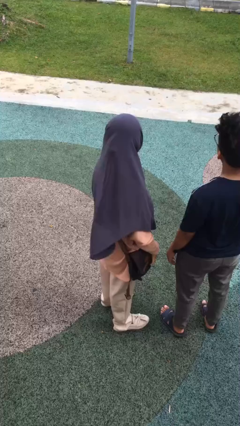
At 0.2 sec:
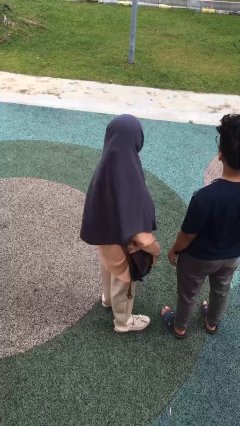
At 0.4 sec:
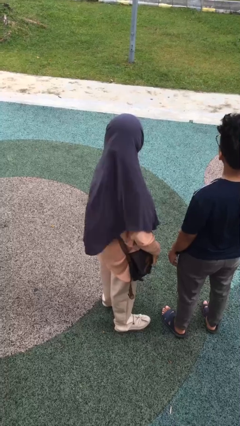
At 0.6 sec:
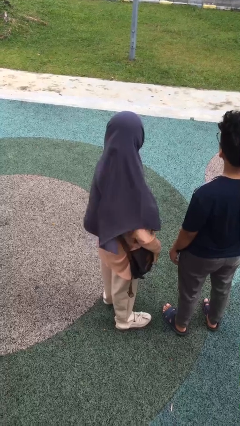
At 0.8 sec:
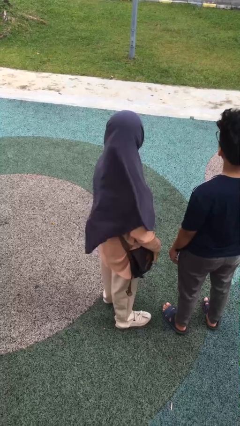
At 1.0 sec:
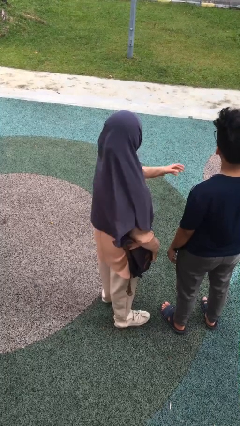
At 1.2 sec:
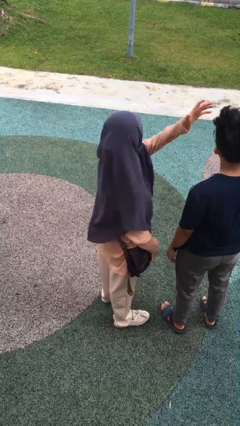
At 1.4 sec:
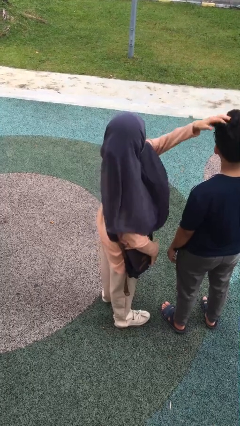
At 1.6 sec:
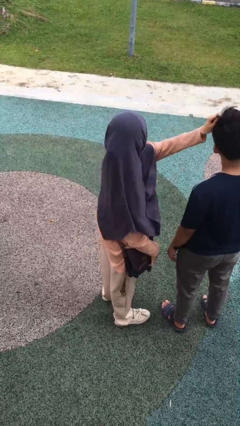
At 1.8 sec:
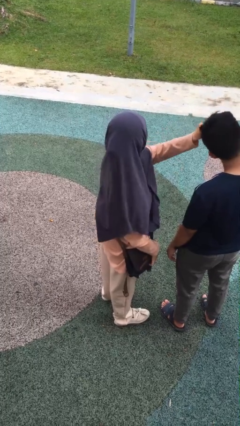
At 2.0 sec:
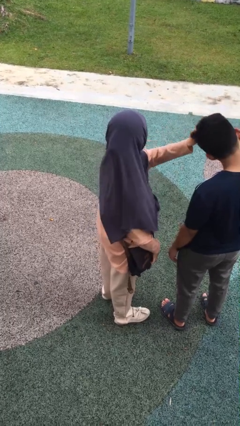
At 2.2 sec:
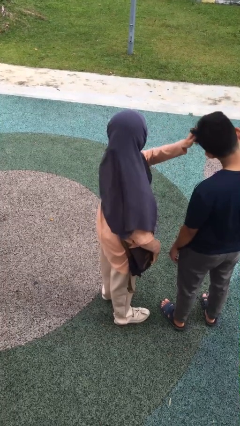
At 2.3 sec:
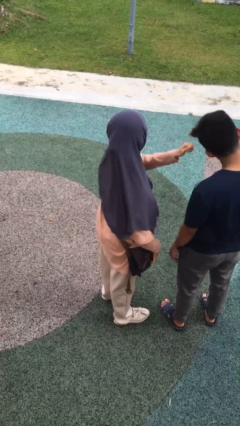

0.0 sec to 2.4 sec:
person grabs person by hair

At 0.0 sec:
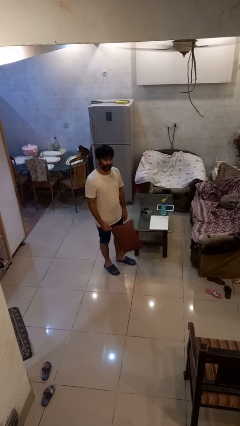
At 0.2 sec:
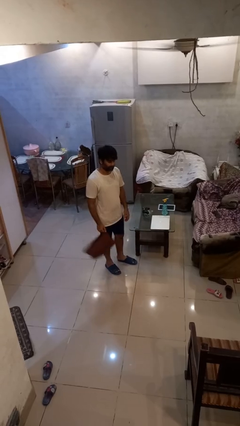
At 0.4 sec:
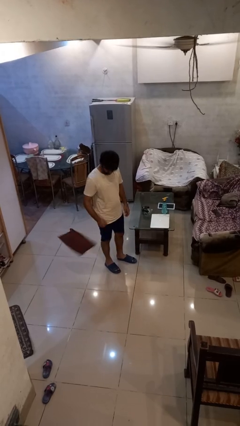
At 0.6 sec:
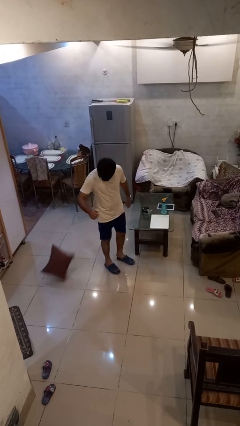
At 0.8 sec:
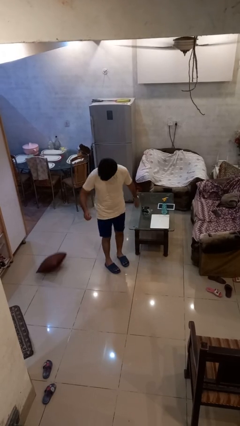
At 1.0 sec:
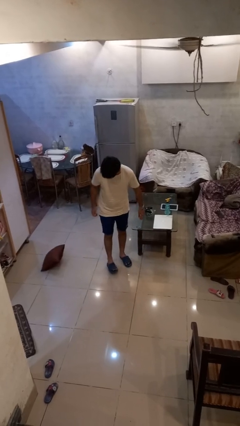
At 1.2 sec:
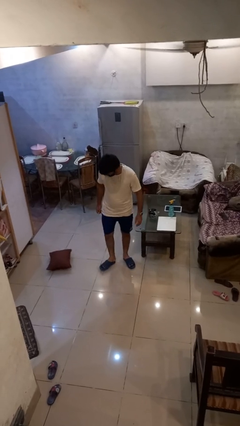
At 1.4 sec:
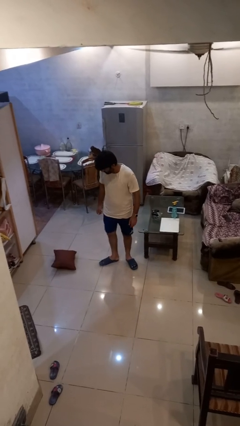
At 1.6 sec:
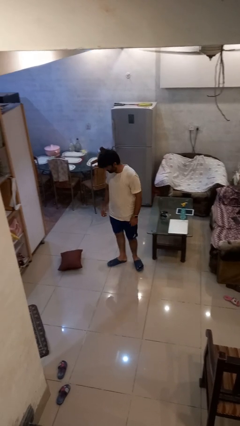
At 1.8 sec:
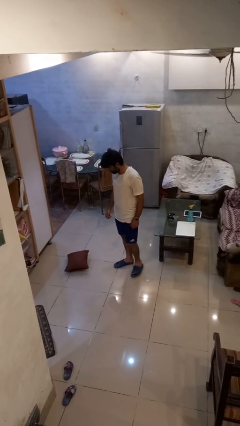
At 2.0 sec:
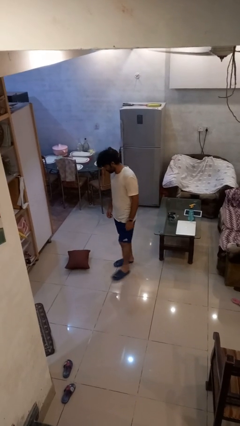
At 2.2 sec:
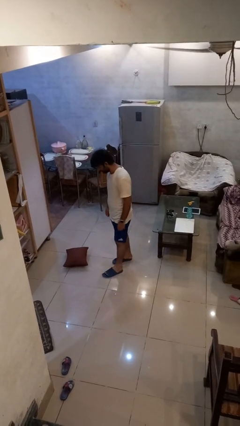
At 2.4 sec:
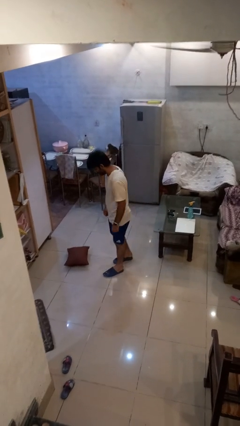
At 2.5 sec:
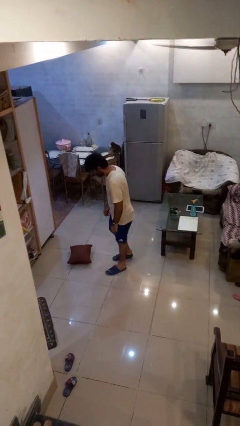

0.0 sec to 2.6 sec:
person drops object

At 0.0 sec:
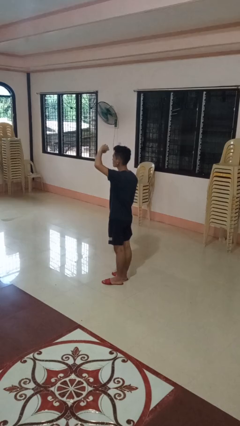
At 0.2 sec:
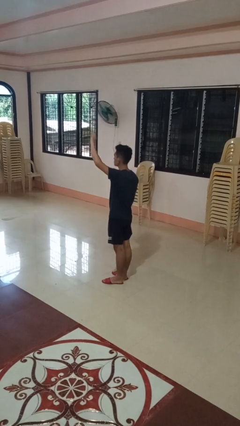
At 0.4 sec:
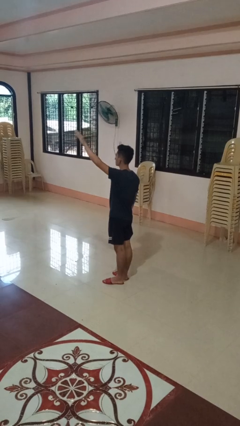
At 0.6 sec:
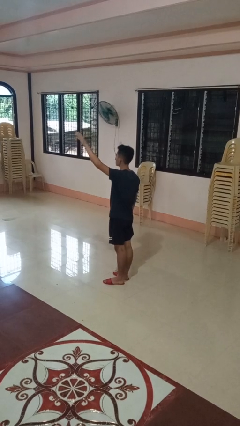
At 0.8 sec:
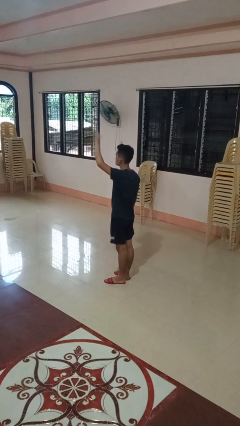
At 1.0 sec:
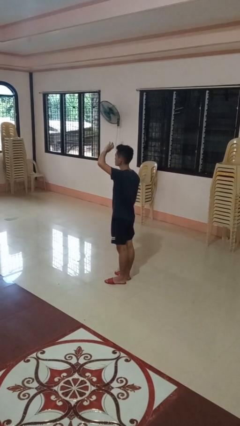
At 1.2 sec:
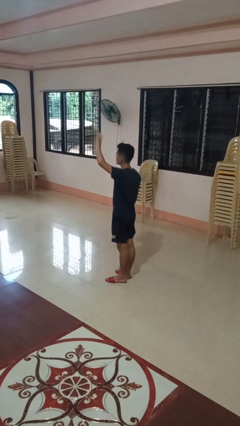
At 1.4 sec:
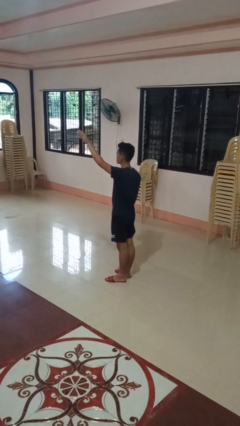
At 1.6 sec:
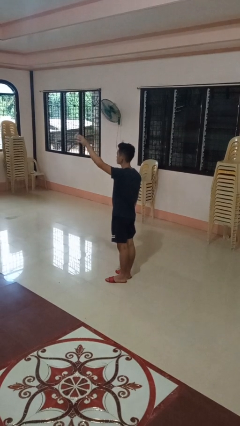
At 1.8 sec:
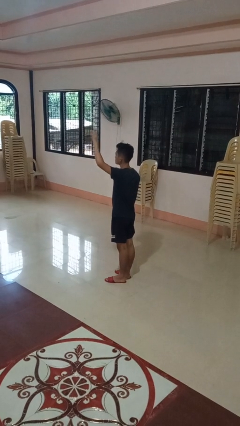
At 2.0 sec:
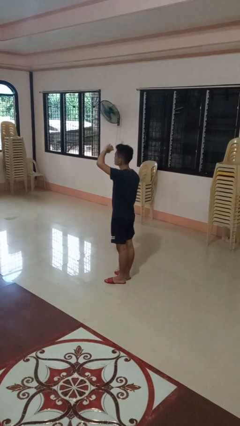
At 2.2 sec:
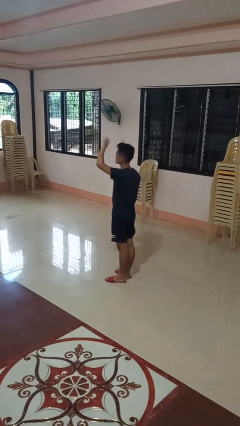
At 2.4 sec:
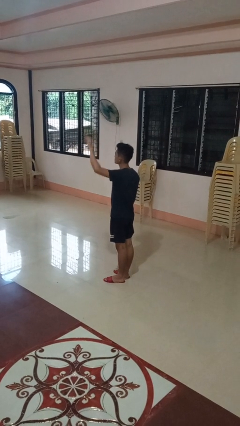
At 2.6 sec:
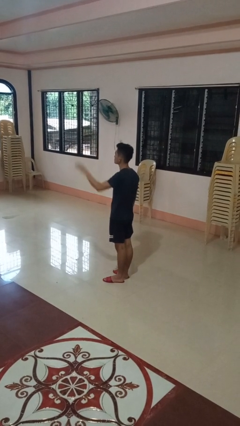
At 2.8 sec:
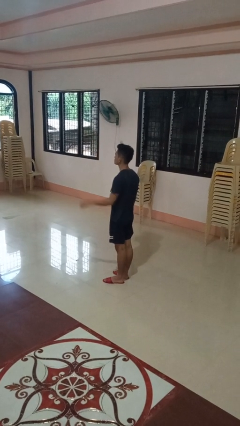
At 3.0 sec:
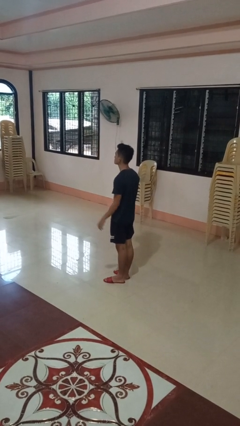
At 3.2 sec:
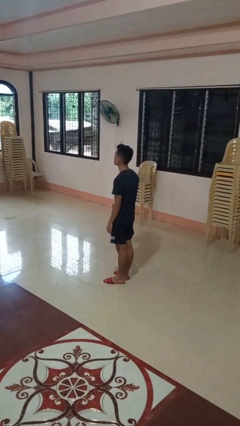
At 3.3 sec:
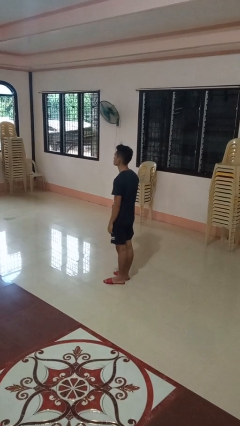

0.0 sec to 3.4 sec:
person waves at person

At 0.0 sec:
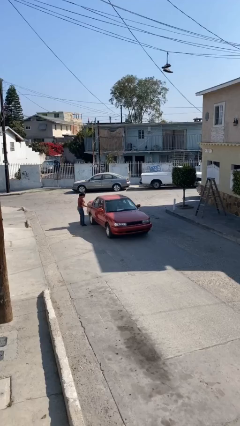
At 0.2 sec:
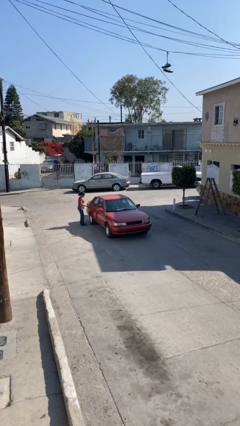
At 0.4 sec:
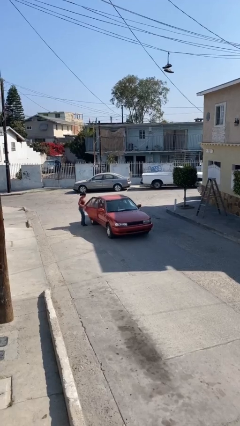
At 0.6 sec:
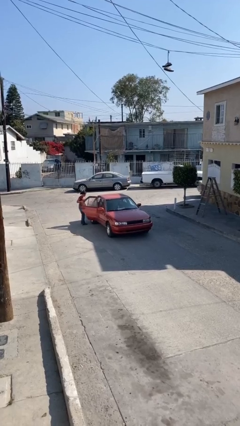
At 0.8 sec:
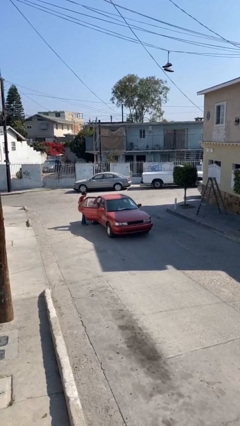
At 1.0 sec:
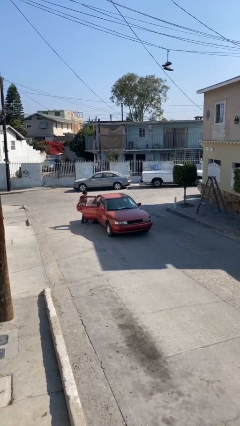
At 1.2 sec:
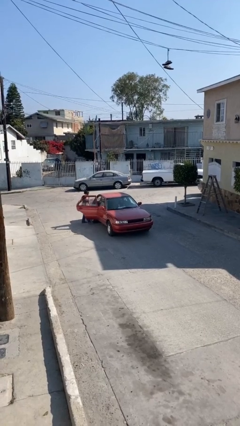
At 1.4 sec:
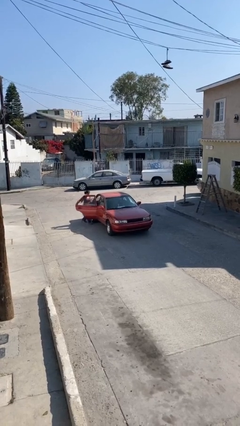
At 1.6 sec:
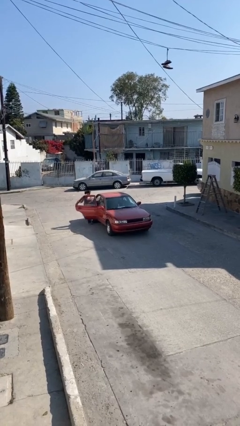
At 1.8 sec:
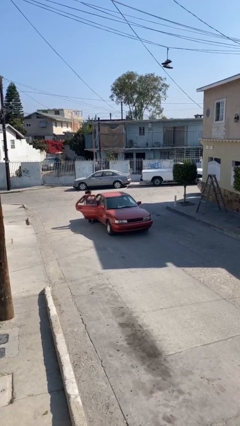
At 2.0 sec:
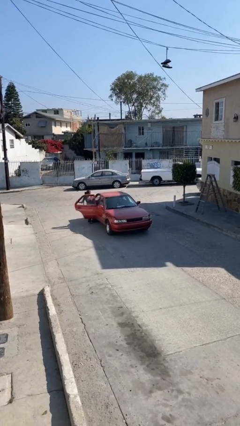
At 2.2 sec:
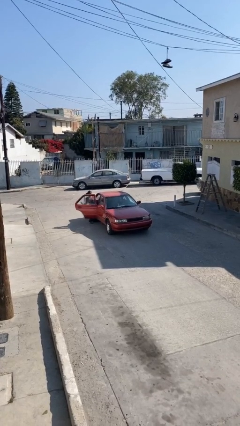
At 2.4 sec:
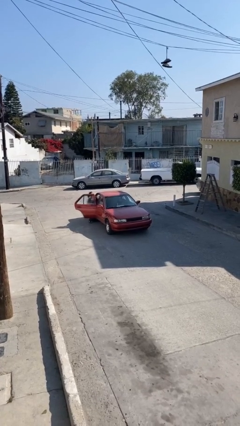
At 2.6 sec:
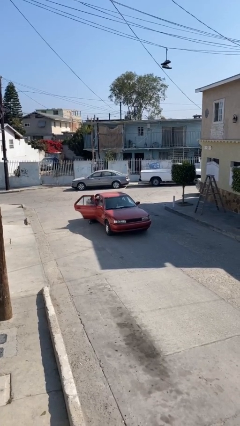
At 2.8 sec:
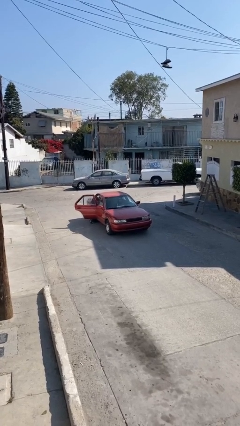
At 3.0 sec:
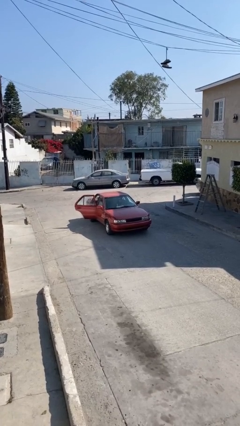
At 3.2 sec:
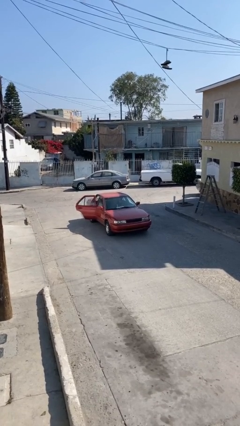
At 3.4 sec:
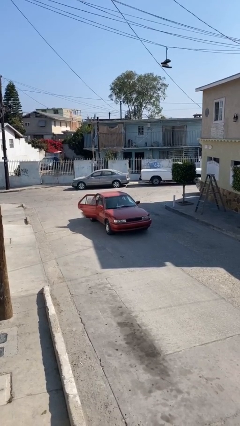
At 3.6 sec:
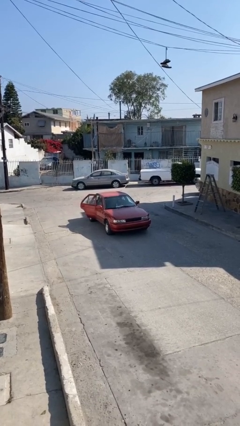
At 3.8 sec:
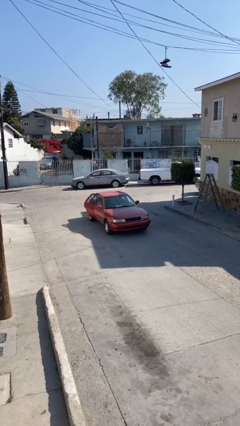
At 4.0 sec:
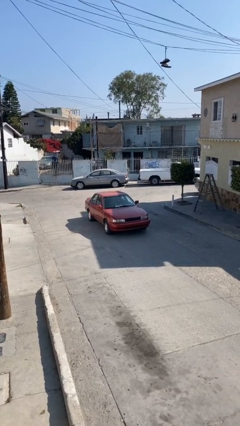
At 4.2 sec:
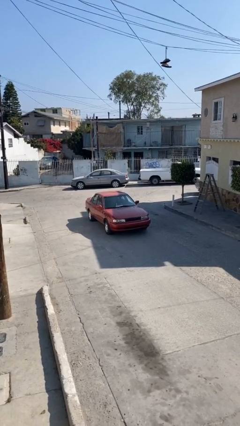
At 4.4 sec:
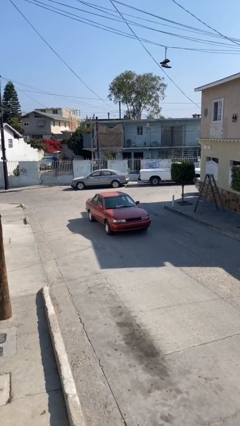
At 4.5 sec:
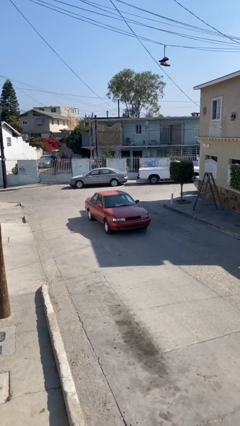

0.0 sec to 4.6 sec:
car picks up person

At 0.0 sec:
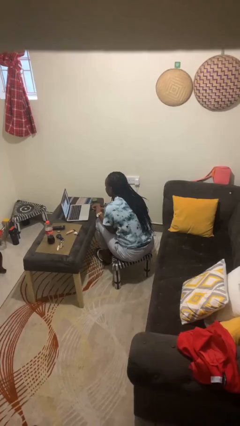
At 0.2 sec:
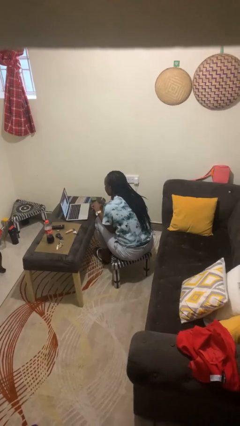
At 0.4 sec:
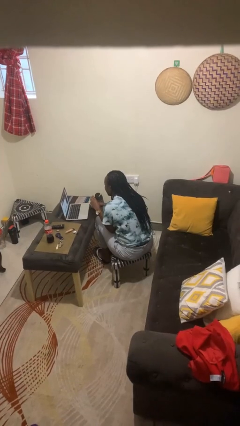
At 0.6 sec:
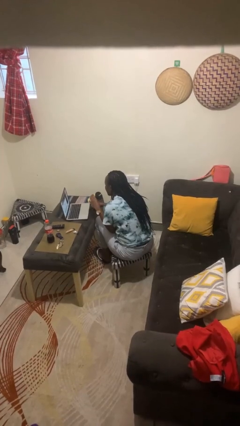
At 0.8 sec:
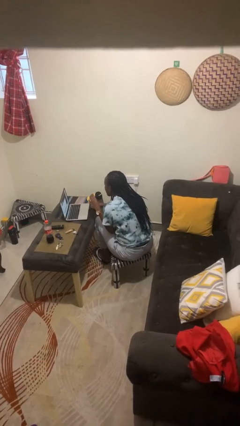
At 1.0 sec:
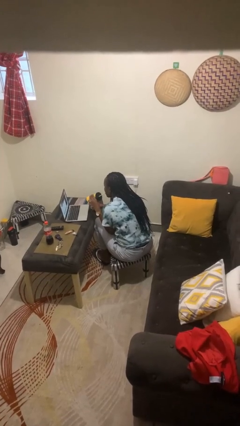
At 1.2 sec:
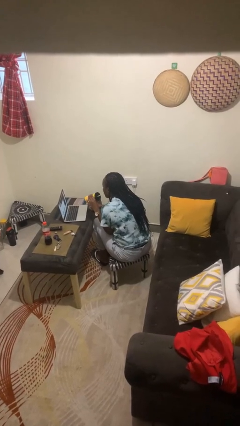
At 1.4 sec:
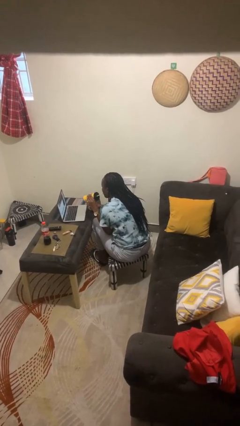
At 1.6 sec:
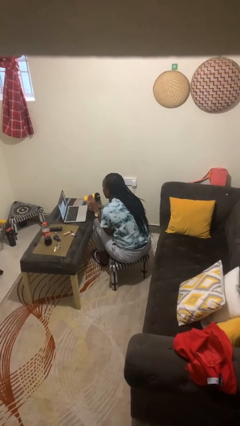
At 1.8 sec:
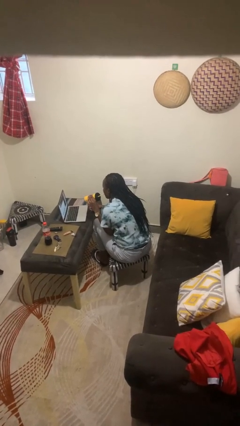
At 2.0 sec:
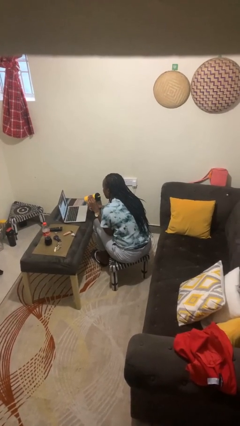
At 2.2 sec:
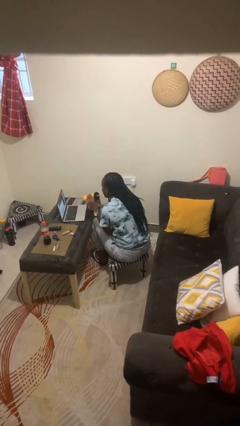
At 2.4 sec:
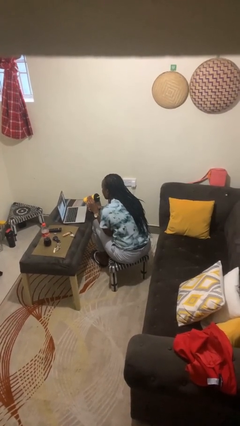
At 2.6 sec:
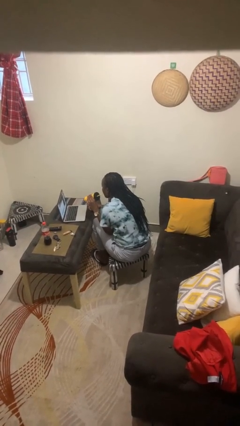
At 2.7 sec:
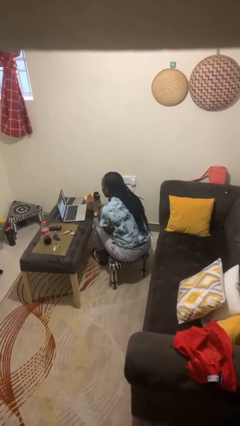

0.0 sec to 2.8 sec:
person drinks from straw

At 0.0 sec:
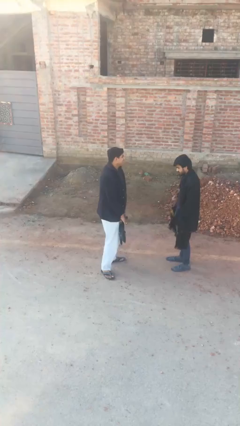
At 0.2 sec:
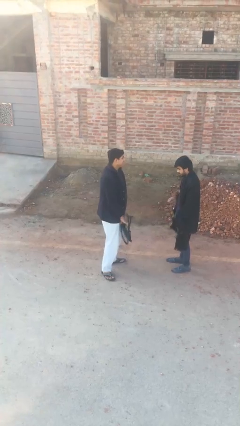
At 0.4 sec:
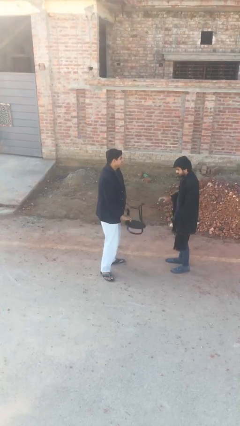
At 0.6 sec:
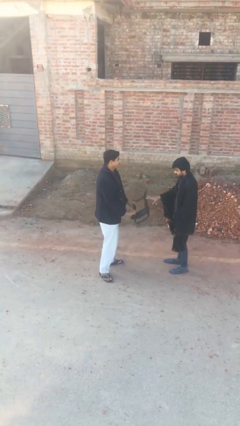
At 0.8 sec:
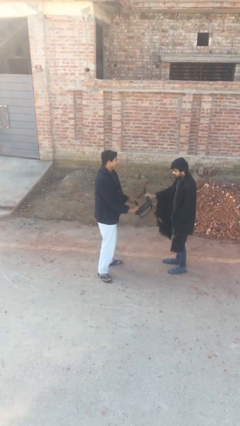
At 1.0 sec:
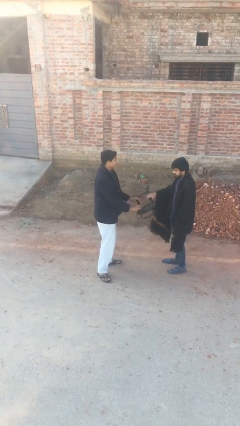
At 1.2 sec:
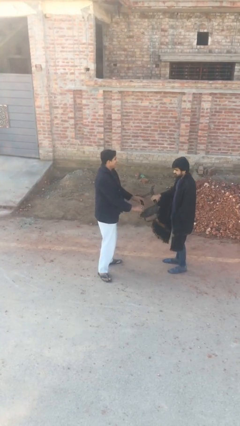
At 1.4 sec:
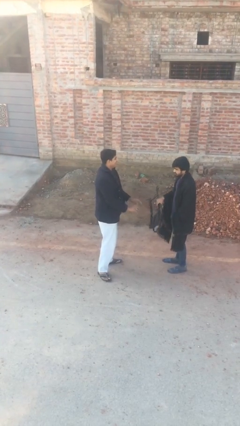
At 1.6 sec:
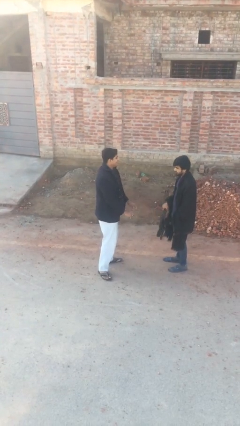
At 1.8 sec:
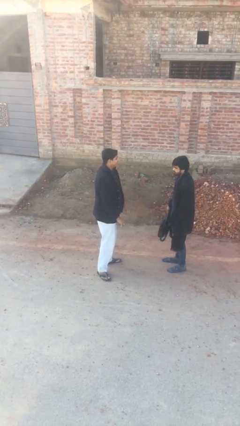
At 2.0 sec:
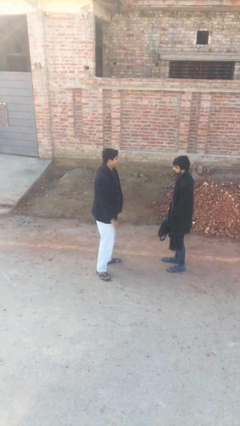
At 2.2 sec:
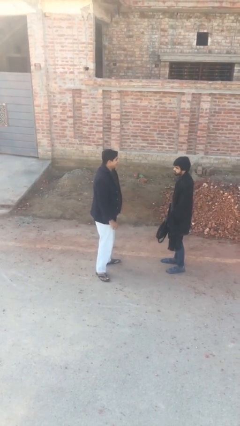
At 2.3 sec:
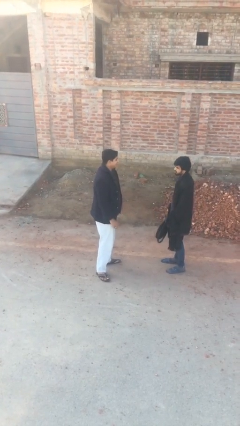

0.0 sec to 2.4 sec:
person transfers object to person
